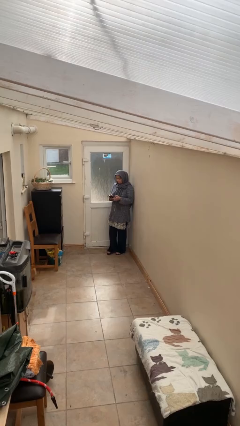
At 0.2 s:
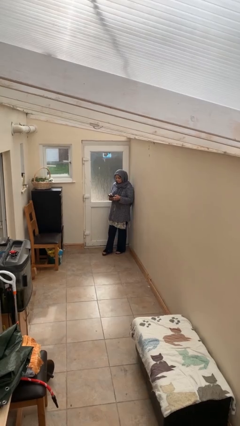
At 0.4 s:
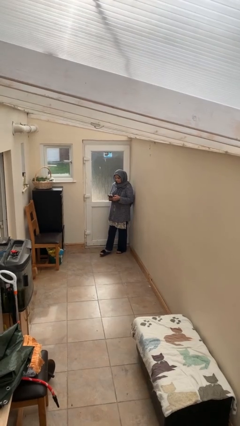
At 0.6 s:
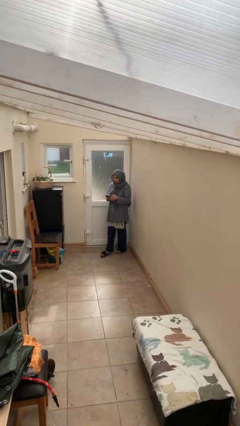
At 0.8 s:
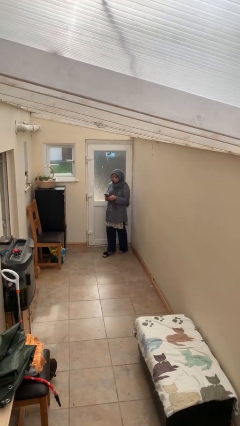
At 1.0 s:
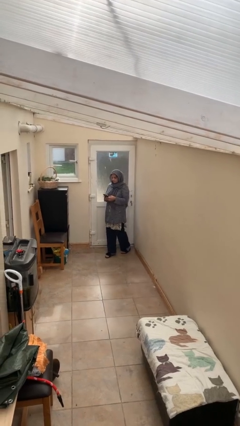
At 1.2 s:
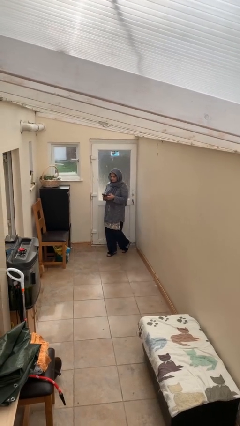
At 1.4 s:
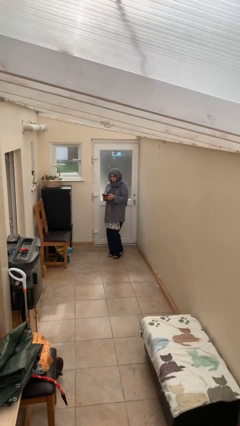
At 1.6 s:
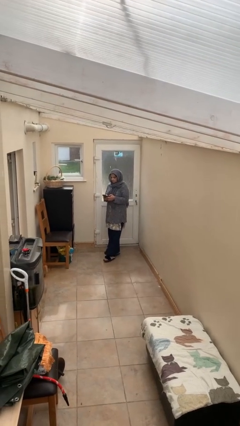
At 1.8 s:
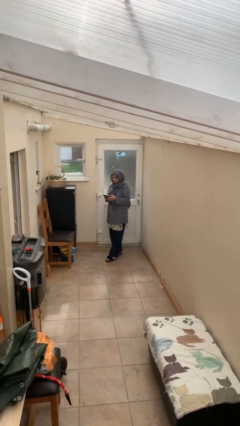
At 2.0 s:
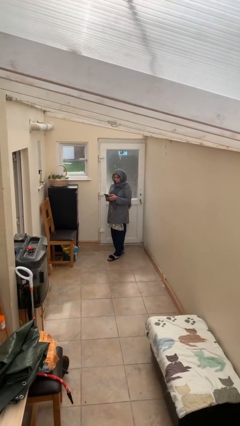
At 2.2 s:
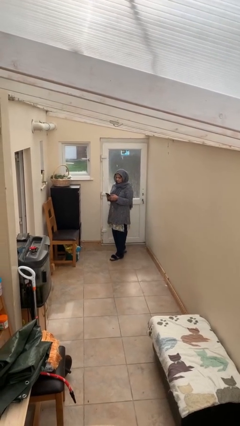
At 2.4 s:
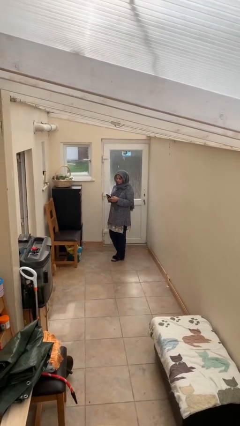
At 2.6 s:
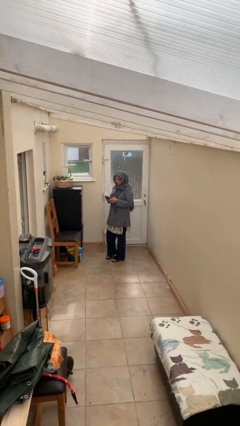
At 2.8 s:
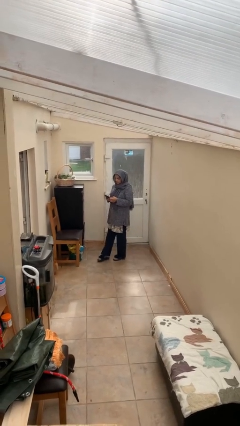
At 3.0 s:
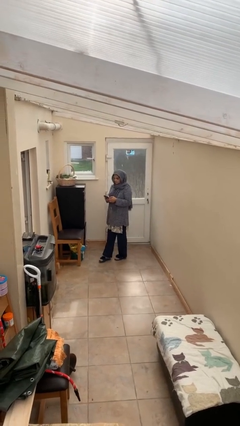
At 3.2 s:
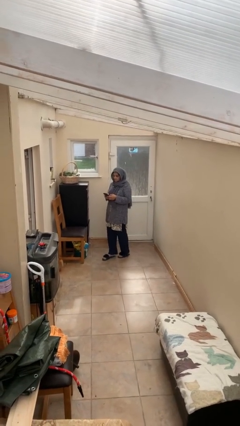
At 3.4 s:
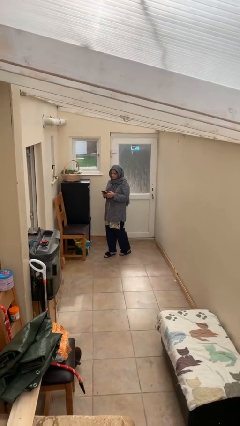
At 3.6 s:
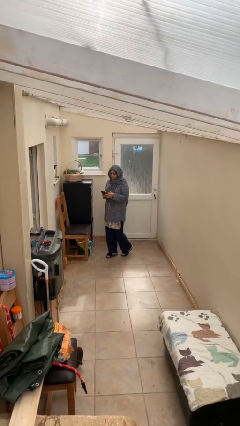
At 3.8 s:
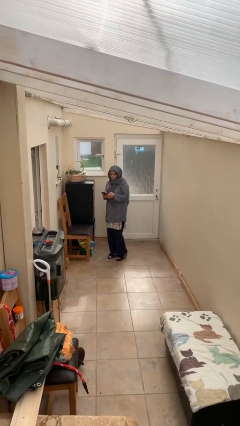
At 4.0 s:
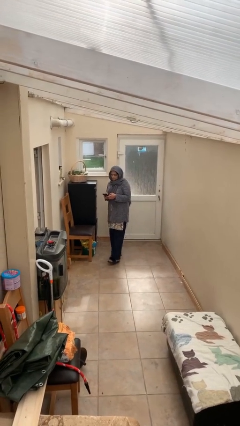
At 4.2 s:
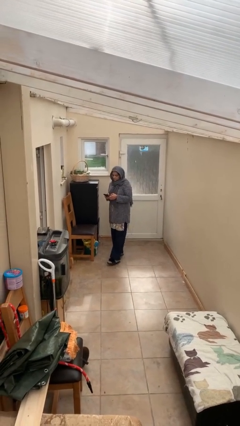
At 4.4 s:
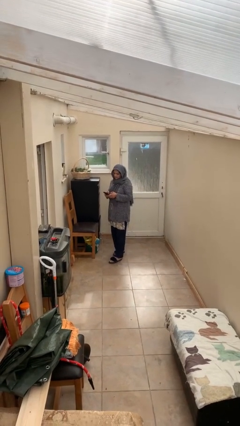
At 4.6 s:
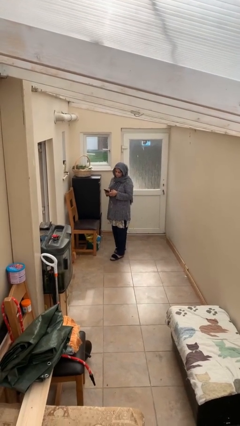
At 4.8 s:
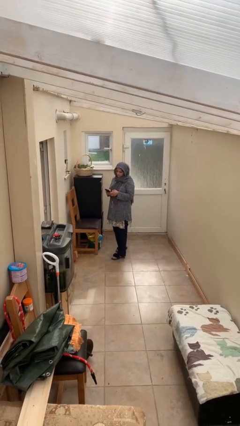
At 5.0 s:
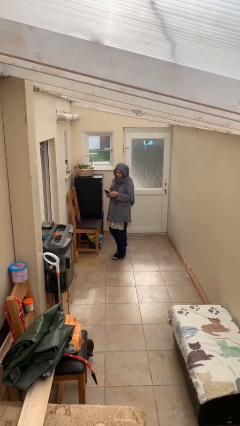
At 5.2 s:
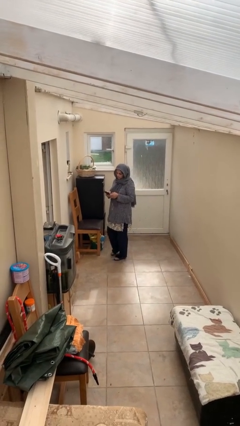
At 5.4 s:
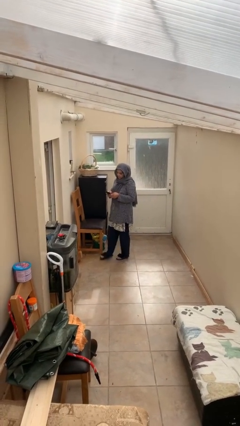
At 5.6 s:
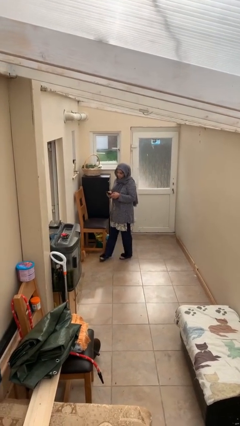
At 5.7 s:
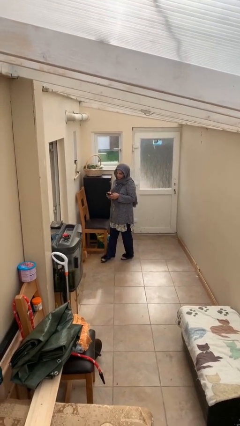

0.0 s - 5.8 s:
person texts on phone

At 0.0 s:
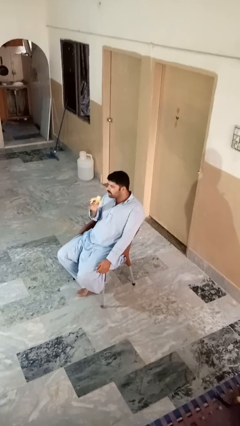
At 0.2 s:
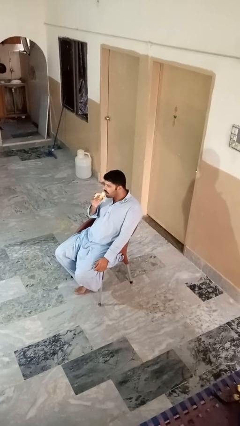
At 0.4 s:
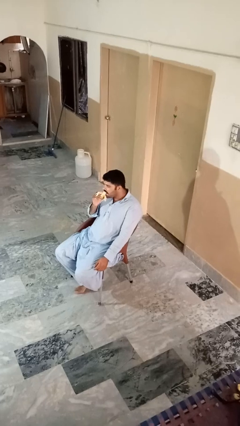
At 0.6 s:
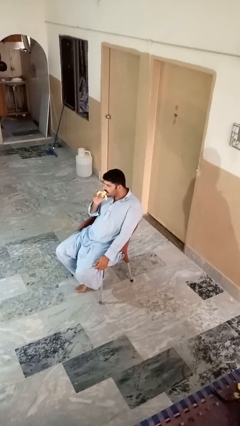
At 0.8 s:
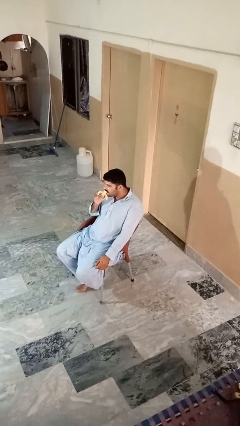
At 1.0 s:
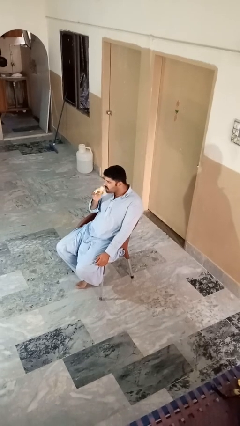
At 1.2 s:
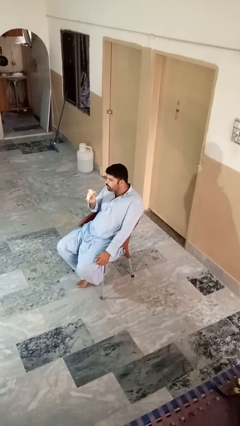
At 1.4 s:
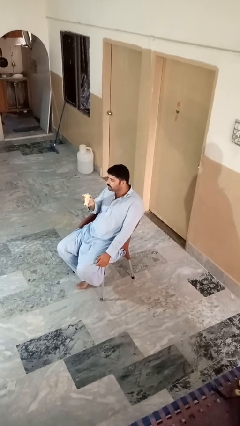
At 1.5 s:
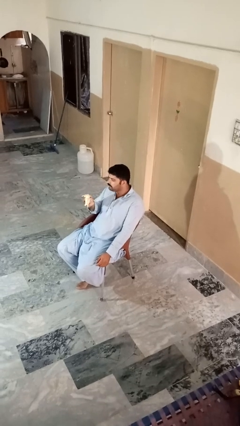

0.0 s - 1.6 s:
person eats banana

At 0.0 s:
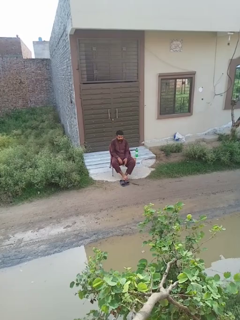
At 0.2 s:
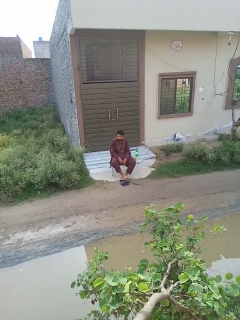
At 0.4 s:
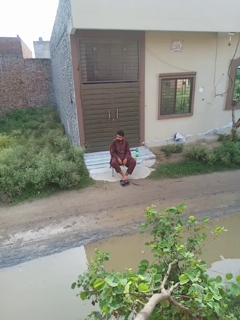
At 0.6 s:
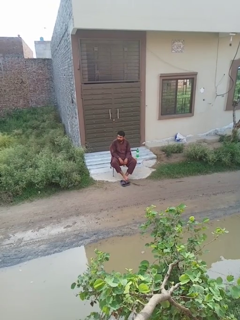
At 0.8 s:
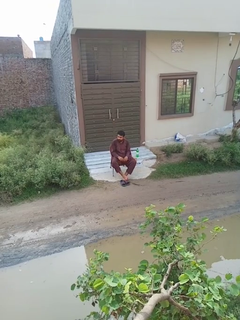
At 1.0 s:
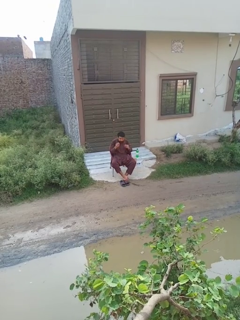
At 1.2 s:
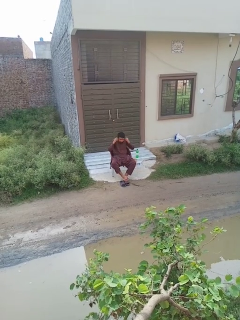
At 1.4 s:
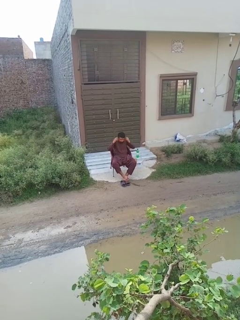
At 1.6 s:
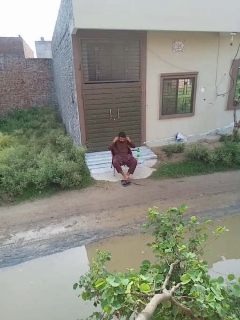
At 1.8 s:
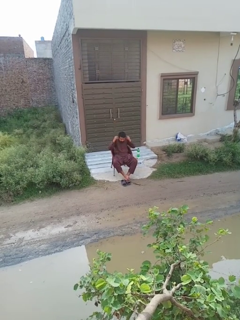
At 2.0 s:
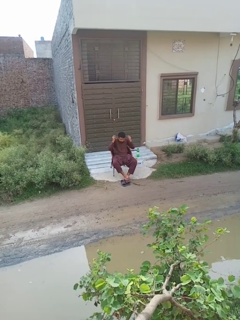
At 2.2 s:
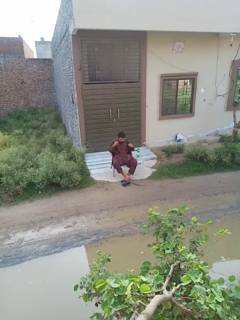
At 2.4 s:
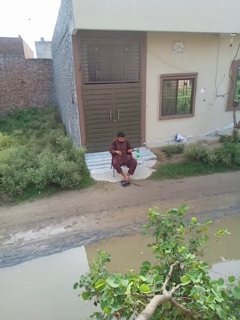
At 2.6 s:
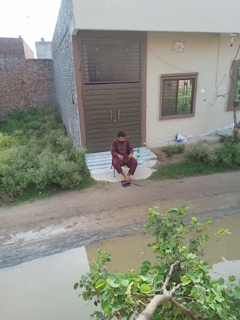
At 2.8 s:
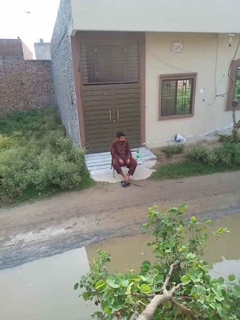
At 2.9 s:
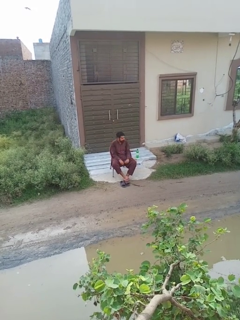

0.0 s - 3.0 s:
person takes off earrings

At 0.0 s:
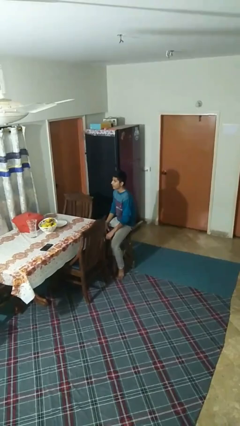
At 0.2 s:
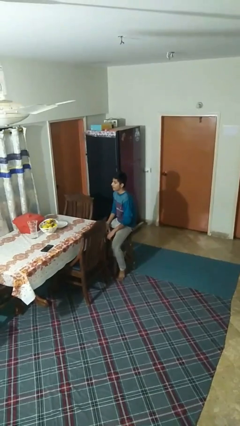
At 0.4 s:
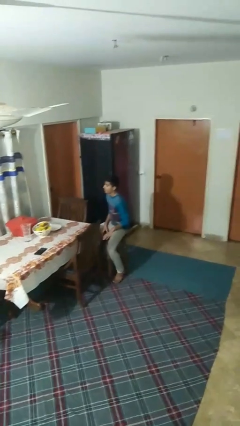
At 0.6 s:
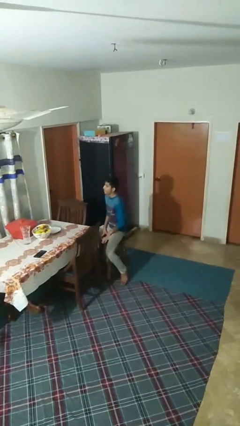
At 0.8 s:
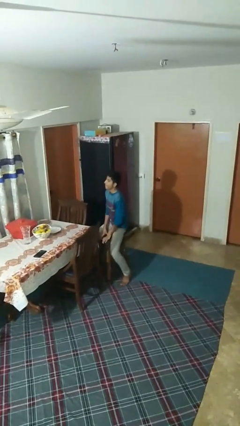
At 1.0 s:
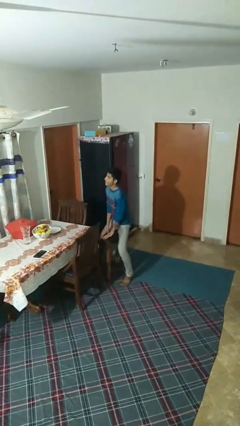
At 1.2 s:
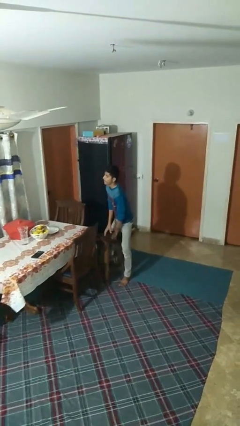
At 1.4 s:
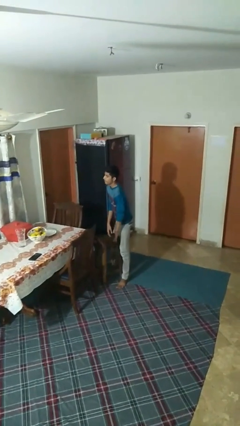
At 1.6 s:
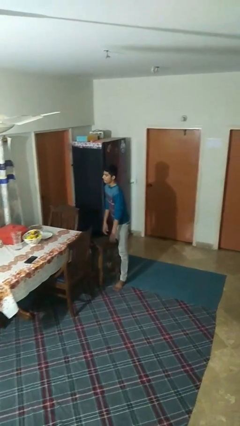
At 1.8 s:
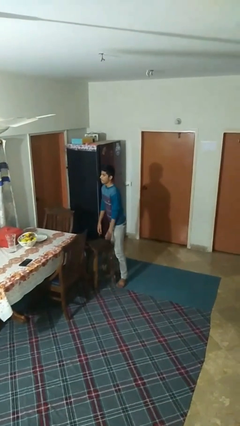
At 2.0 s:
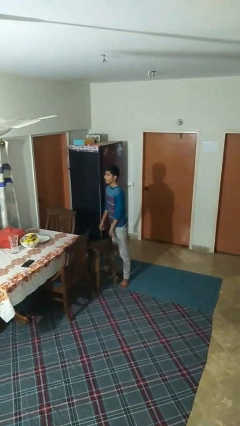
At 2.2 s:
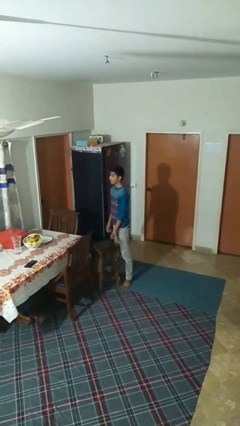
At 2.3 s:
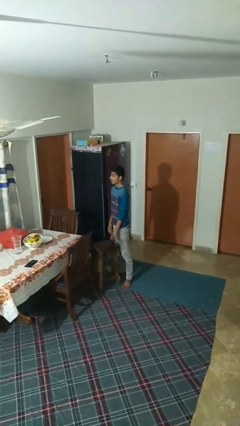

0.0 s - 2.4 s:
person stands up

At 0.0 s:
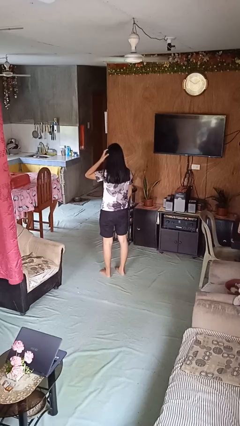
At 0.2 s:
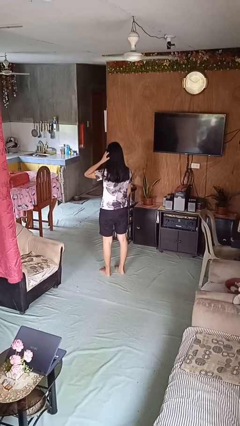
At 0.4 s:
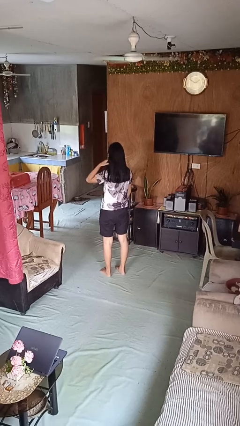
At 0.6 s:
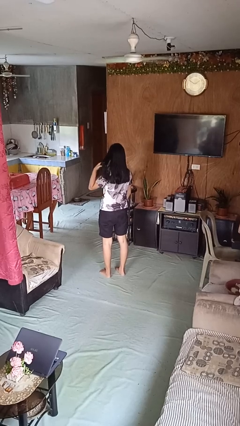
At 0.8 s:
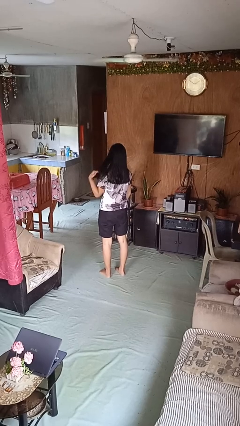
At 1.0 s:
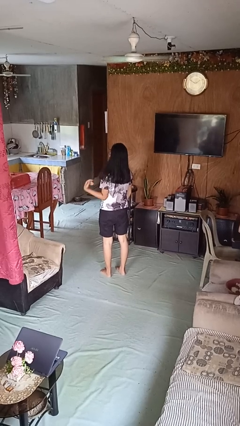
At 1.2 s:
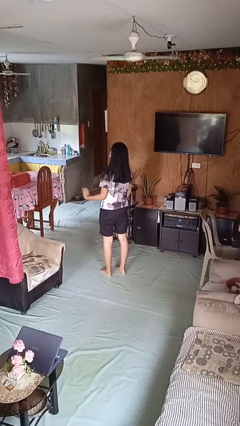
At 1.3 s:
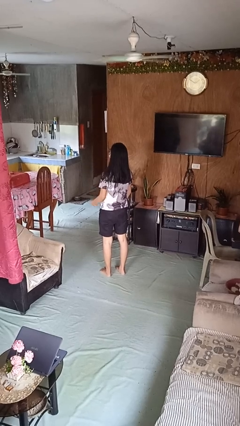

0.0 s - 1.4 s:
person strokes hair

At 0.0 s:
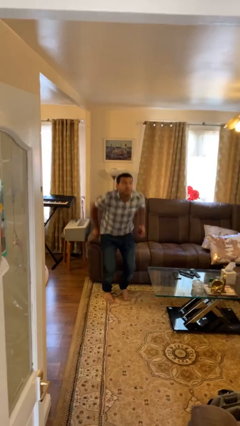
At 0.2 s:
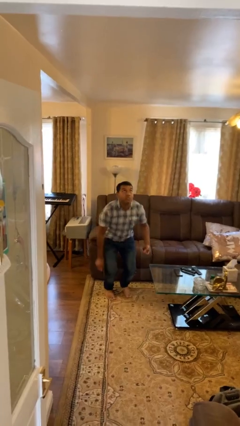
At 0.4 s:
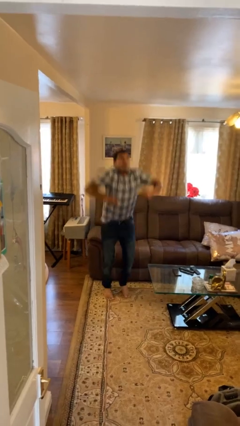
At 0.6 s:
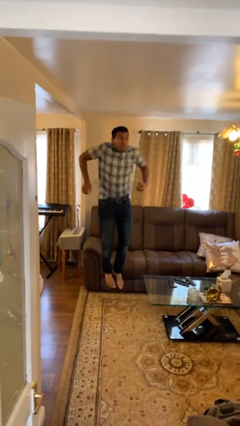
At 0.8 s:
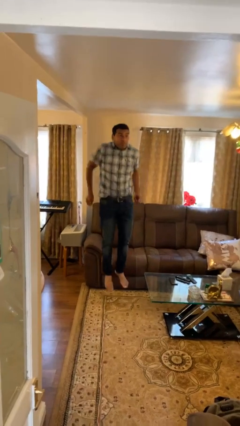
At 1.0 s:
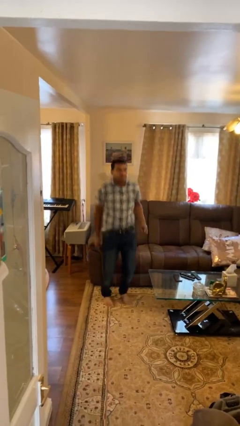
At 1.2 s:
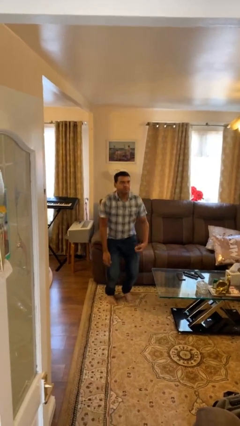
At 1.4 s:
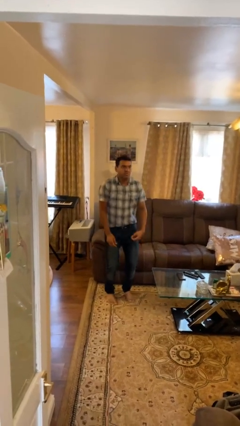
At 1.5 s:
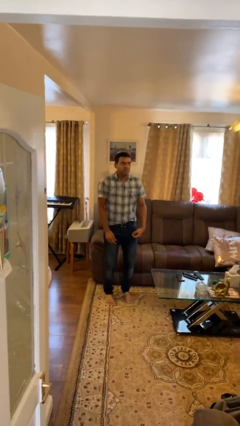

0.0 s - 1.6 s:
person jumps

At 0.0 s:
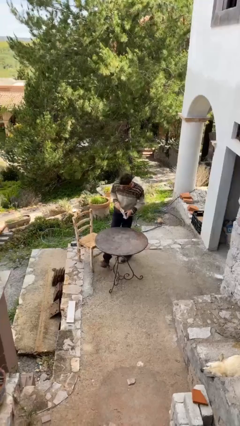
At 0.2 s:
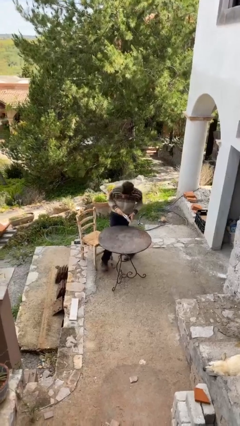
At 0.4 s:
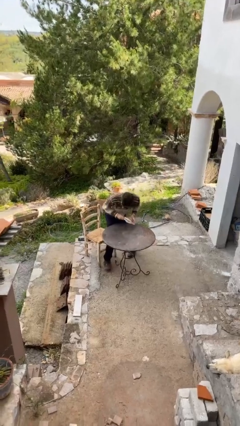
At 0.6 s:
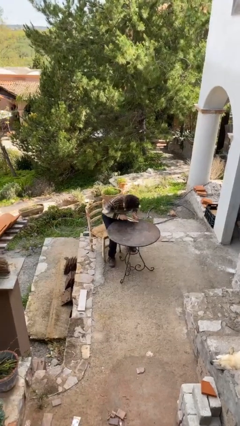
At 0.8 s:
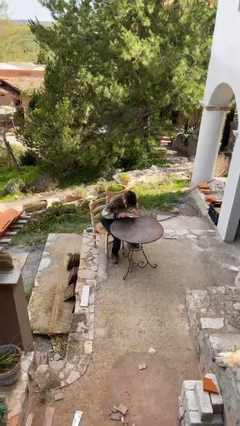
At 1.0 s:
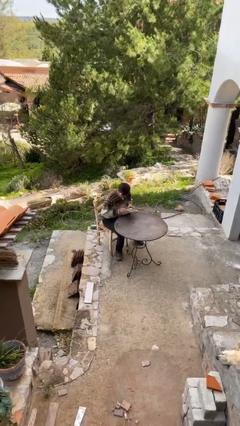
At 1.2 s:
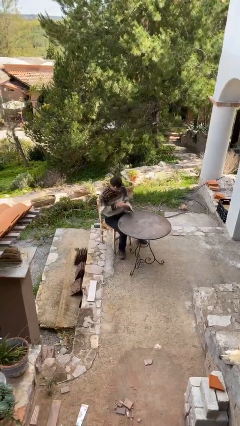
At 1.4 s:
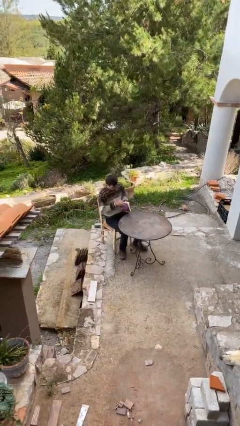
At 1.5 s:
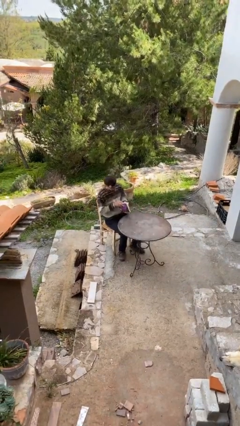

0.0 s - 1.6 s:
person sits down

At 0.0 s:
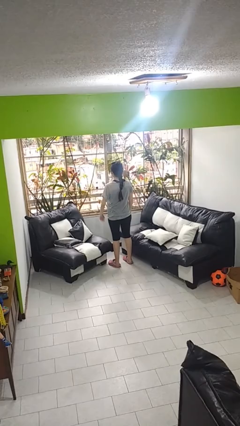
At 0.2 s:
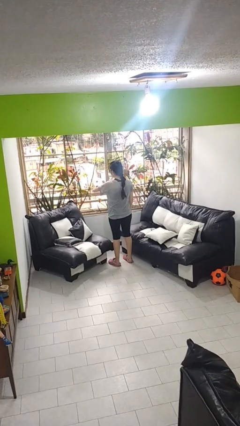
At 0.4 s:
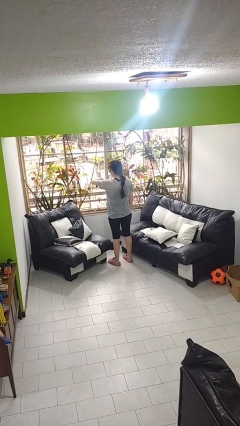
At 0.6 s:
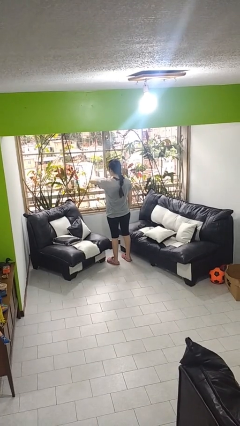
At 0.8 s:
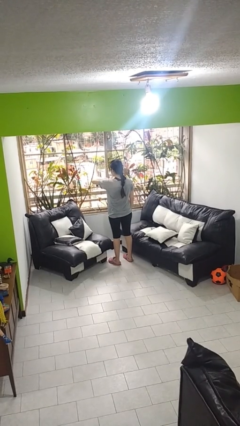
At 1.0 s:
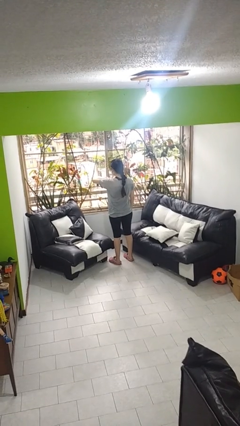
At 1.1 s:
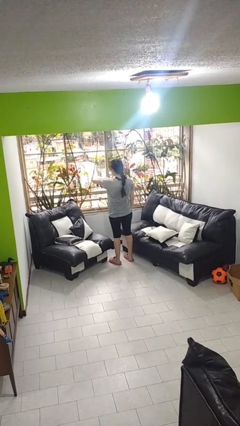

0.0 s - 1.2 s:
person looks at wristwatch
